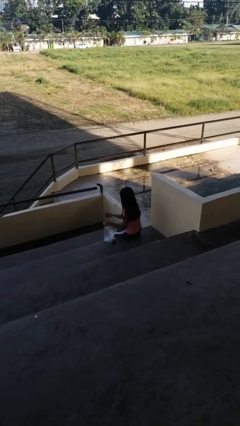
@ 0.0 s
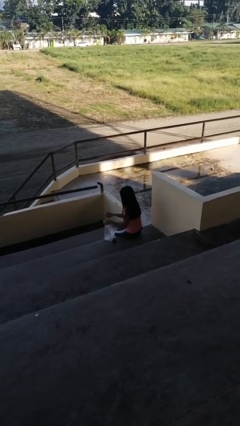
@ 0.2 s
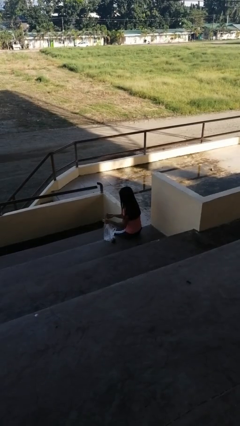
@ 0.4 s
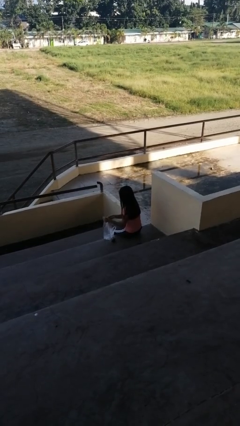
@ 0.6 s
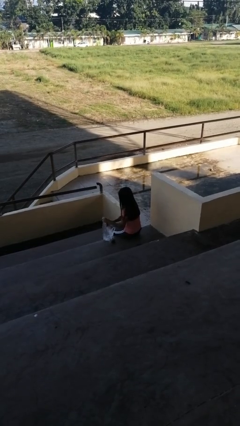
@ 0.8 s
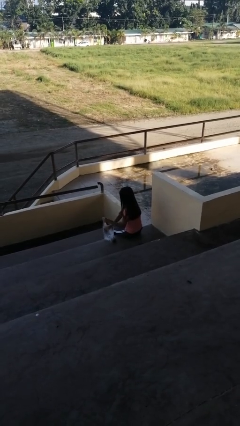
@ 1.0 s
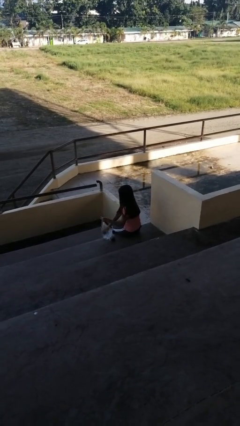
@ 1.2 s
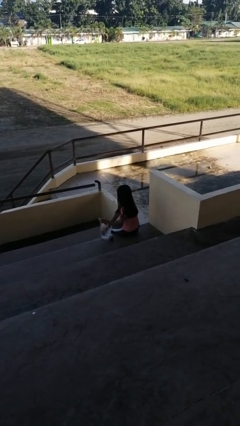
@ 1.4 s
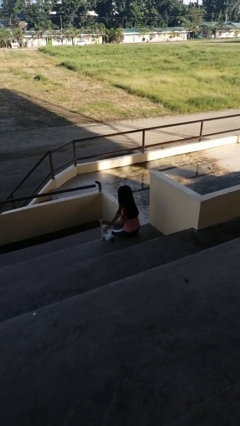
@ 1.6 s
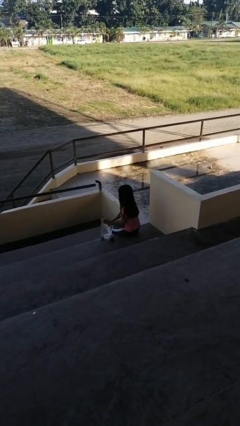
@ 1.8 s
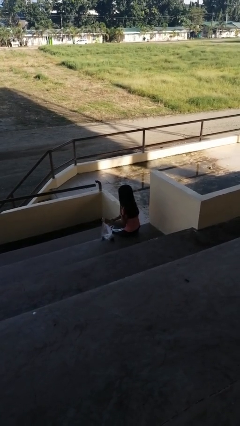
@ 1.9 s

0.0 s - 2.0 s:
person puts object into bag

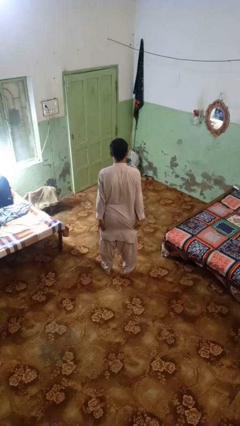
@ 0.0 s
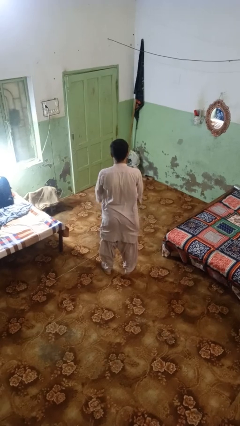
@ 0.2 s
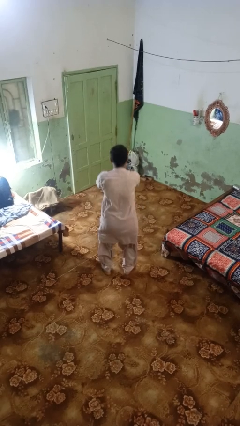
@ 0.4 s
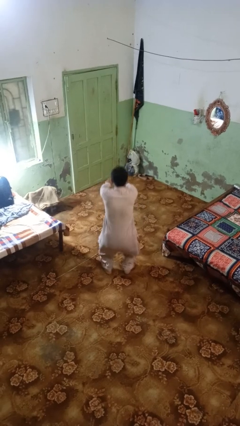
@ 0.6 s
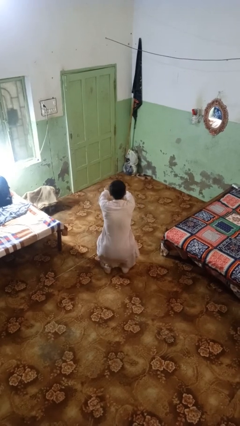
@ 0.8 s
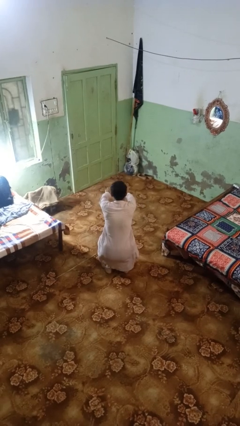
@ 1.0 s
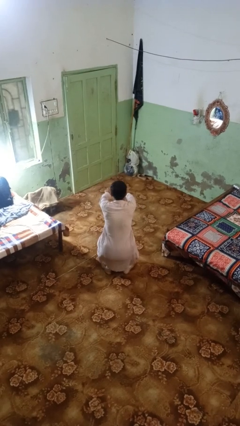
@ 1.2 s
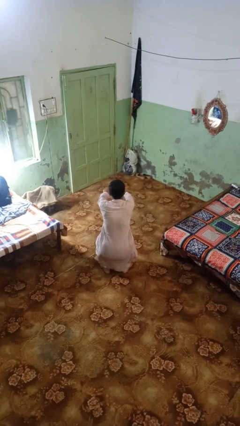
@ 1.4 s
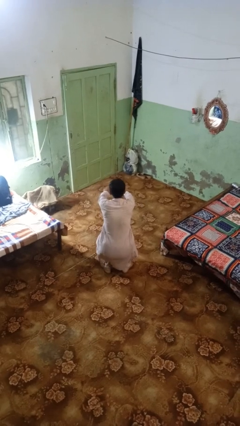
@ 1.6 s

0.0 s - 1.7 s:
person squats

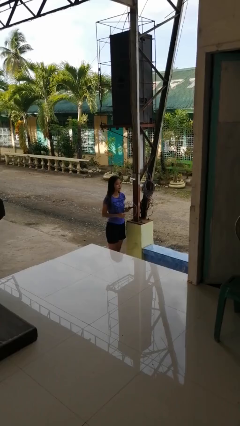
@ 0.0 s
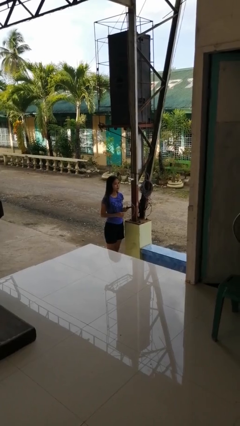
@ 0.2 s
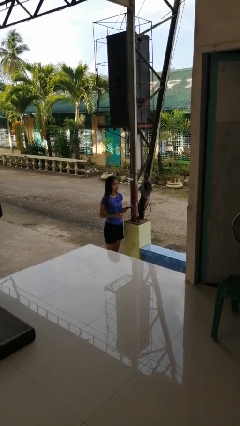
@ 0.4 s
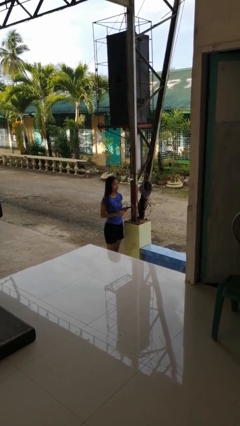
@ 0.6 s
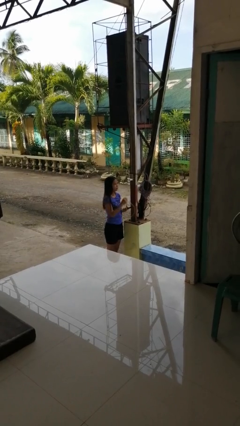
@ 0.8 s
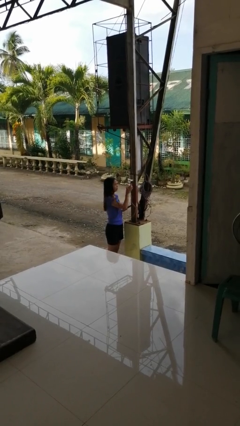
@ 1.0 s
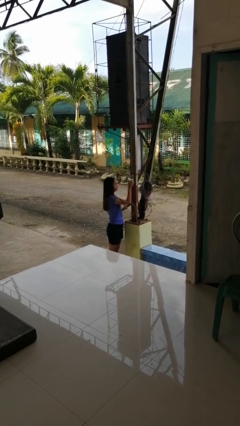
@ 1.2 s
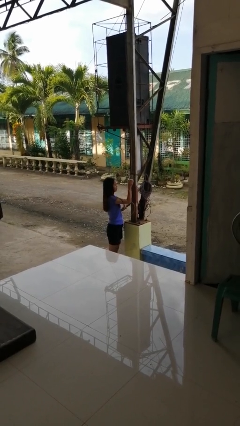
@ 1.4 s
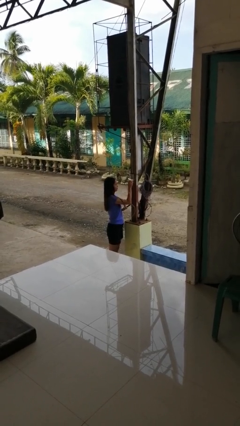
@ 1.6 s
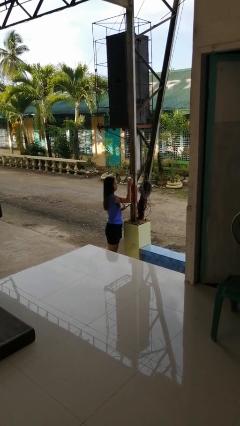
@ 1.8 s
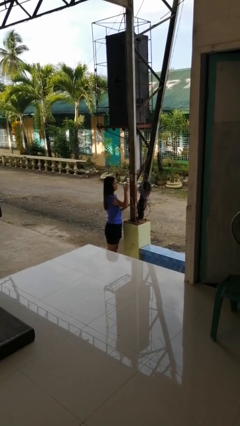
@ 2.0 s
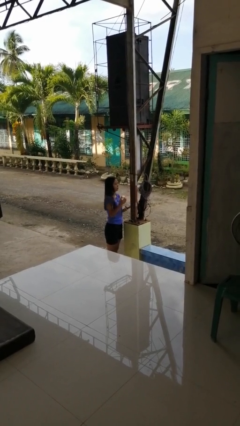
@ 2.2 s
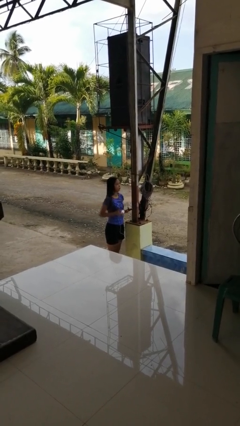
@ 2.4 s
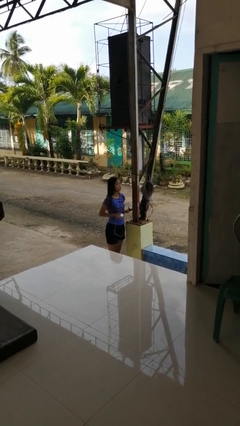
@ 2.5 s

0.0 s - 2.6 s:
person unplugs from electrical socket

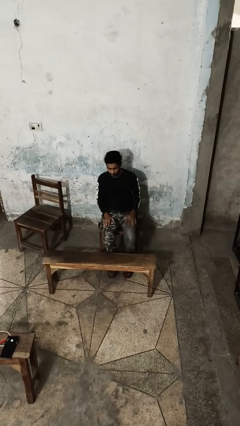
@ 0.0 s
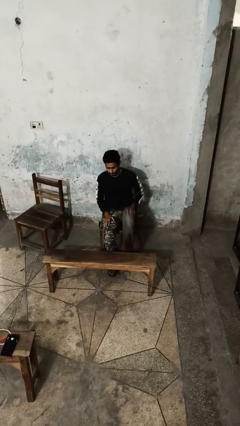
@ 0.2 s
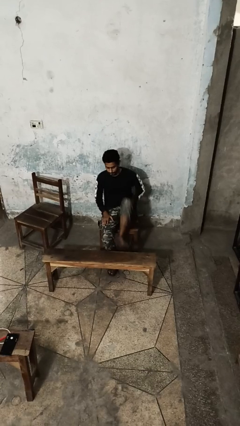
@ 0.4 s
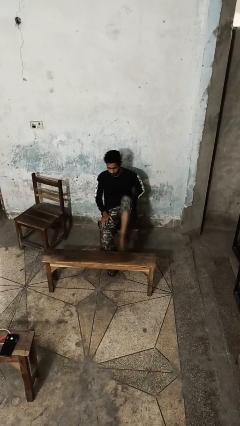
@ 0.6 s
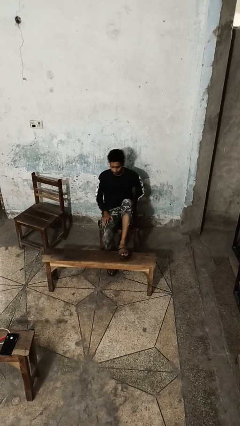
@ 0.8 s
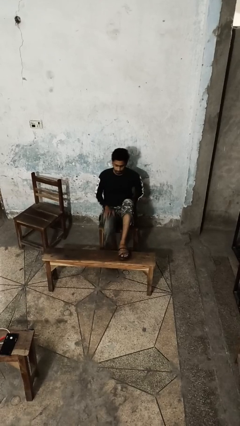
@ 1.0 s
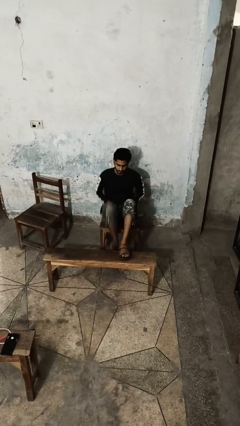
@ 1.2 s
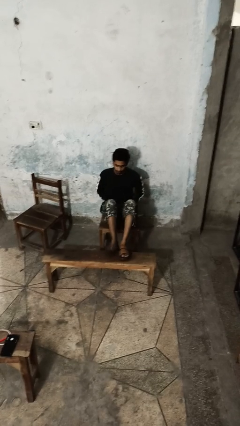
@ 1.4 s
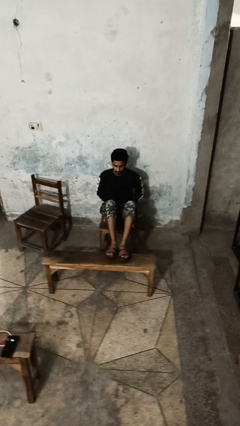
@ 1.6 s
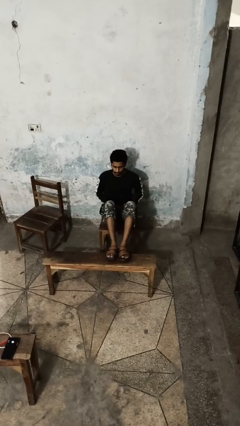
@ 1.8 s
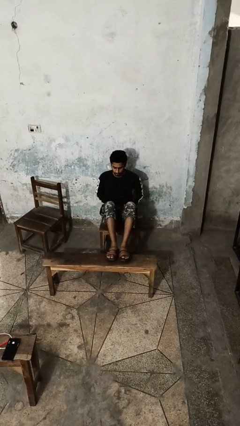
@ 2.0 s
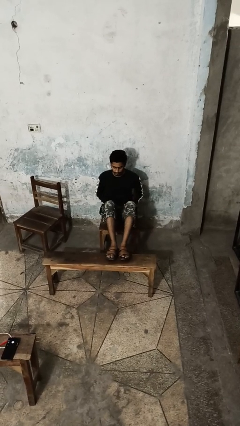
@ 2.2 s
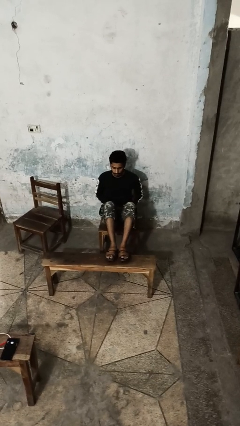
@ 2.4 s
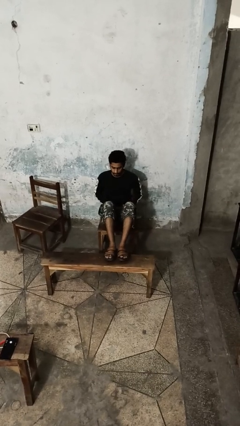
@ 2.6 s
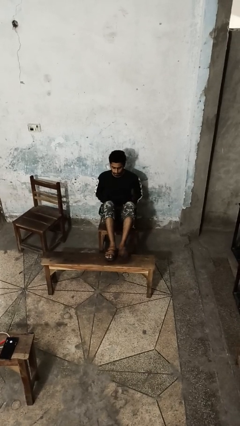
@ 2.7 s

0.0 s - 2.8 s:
person puts feet up

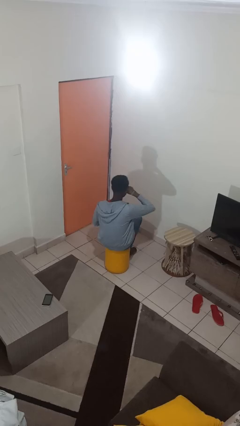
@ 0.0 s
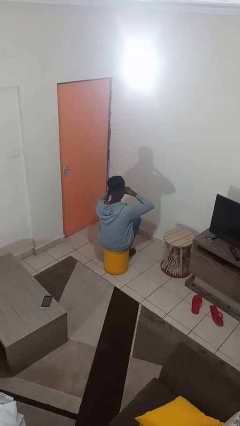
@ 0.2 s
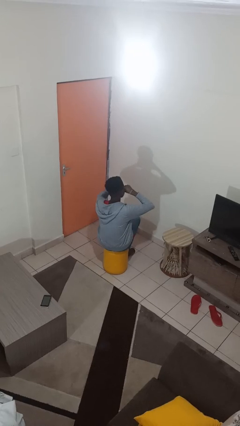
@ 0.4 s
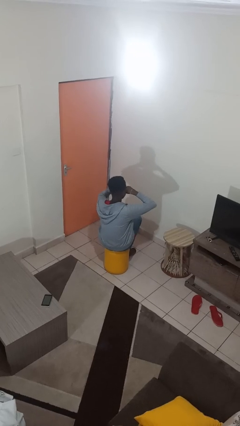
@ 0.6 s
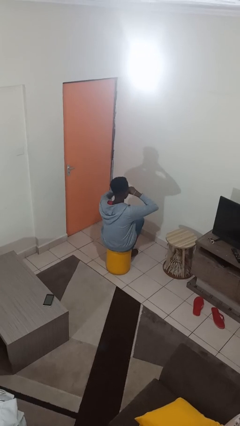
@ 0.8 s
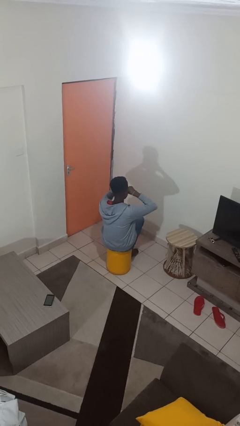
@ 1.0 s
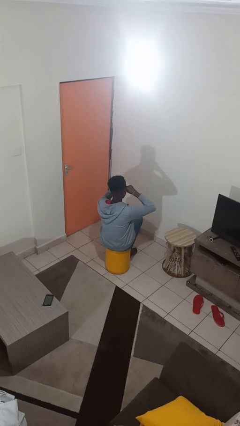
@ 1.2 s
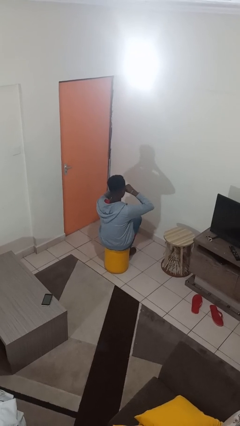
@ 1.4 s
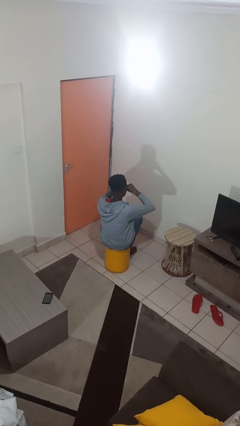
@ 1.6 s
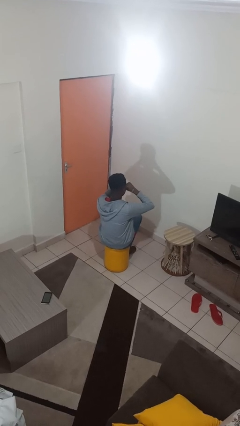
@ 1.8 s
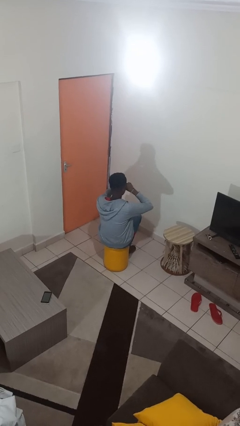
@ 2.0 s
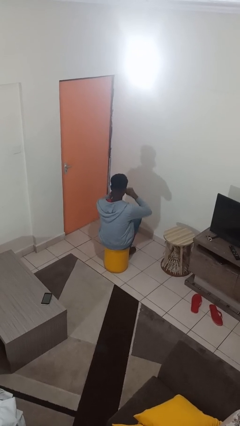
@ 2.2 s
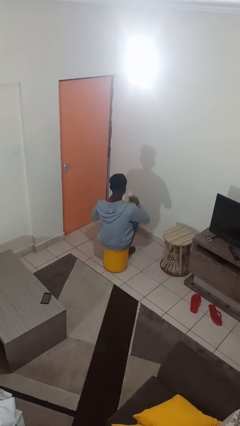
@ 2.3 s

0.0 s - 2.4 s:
person rubs eyes

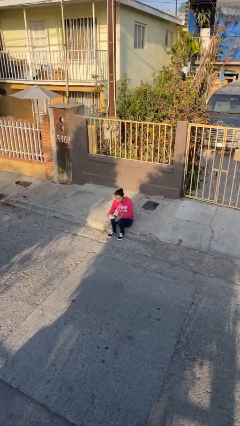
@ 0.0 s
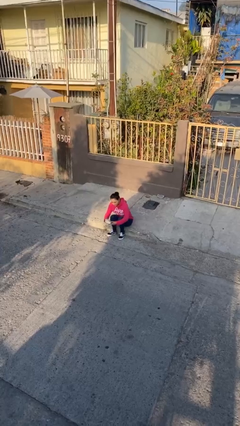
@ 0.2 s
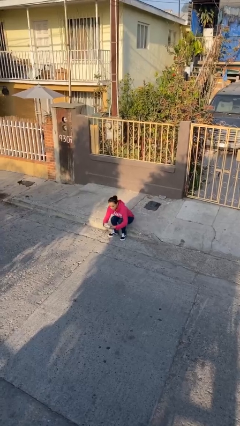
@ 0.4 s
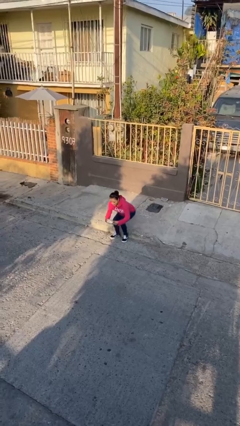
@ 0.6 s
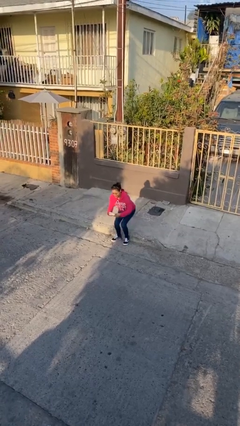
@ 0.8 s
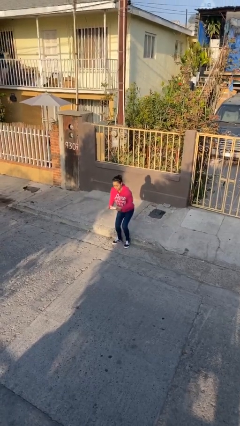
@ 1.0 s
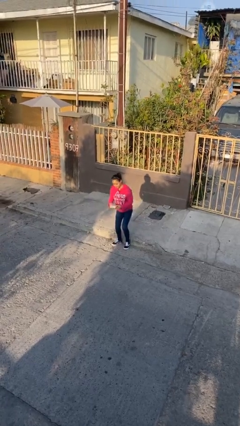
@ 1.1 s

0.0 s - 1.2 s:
person stands up

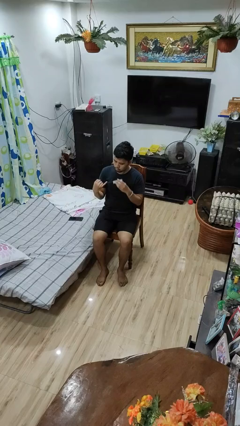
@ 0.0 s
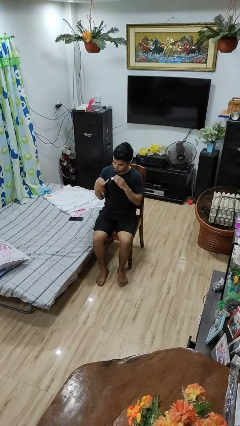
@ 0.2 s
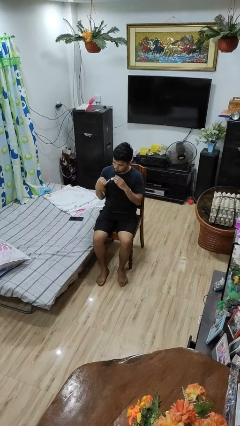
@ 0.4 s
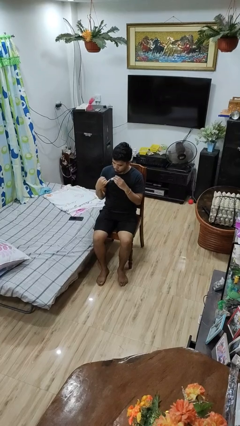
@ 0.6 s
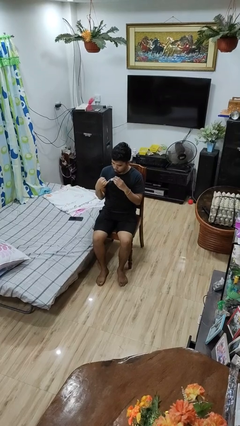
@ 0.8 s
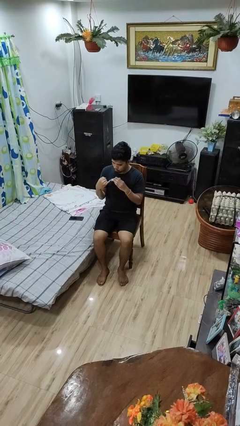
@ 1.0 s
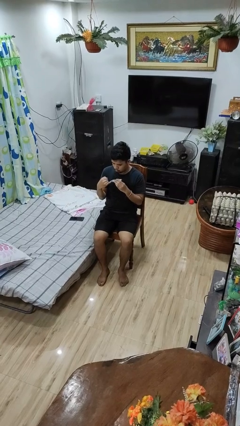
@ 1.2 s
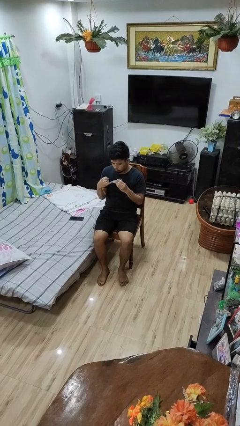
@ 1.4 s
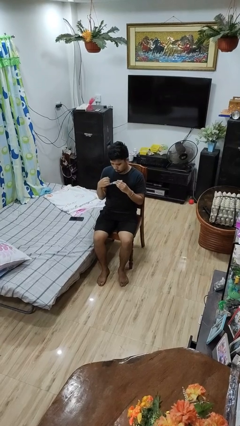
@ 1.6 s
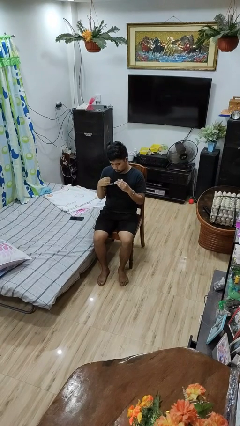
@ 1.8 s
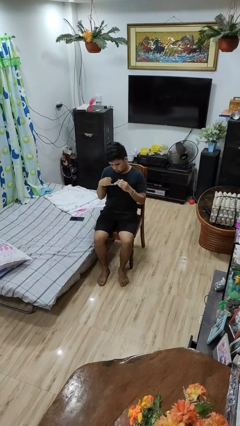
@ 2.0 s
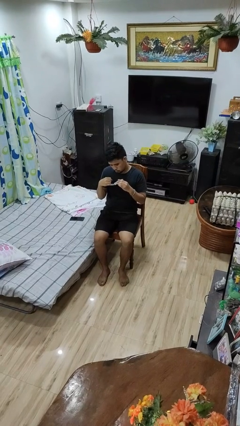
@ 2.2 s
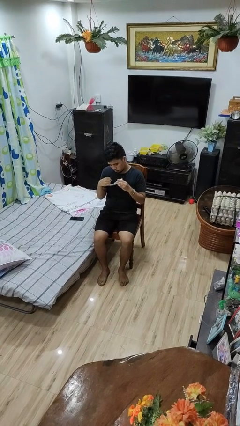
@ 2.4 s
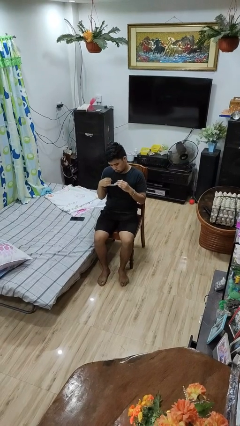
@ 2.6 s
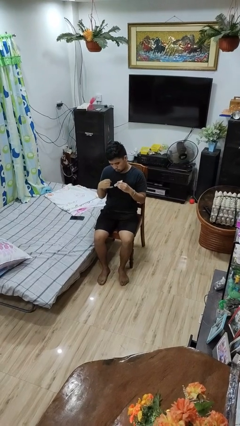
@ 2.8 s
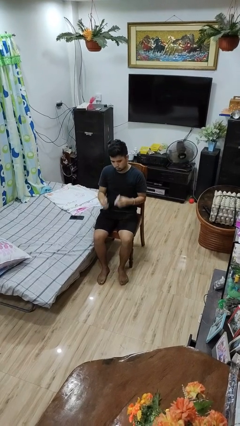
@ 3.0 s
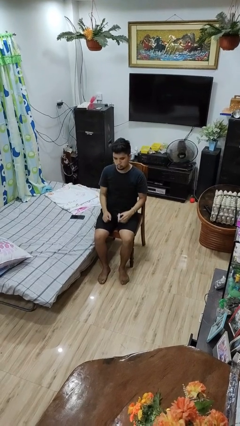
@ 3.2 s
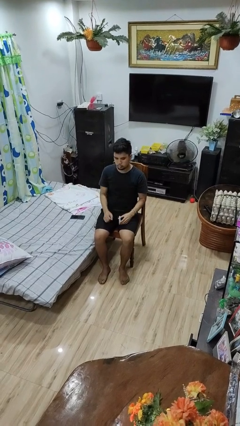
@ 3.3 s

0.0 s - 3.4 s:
person clips fingernails

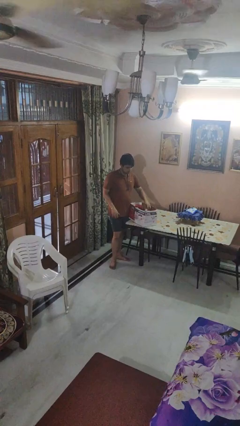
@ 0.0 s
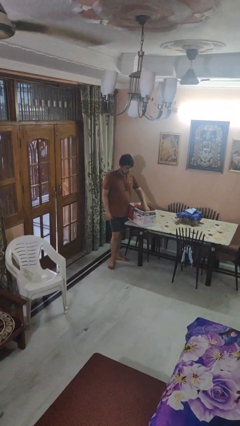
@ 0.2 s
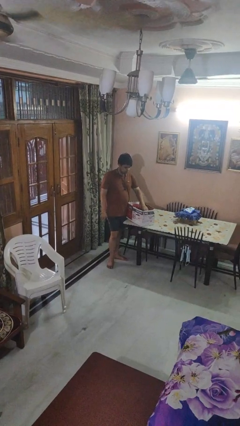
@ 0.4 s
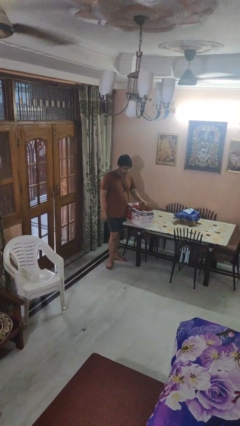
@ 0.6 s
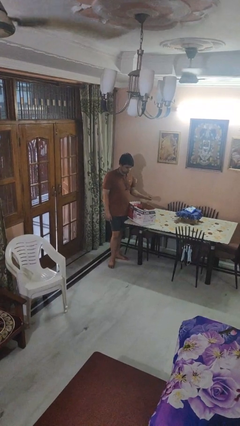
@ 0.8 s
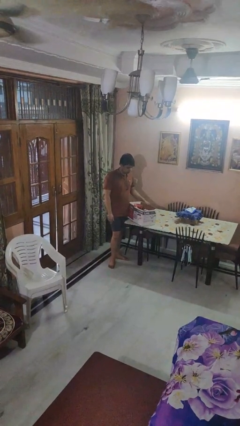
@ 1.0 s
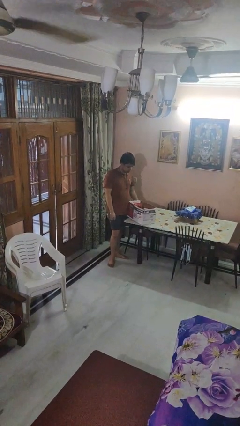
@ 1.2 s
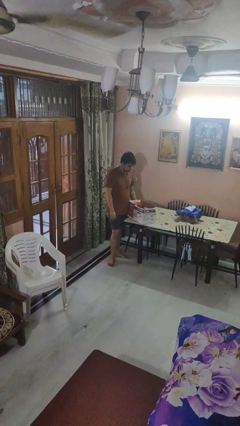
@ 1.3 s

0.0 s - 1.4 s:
person puts object into box
